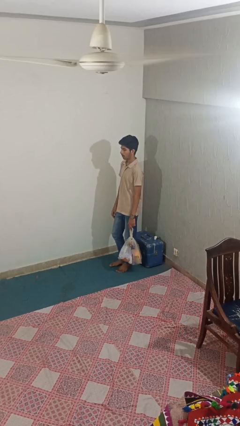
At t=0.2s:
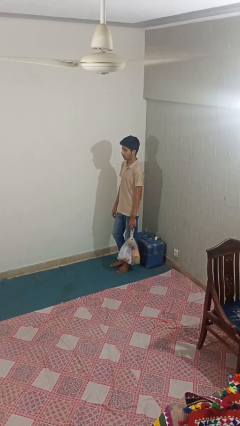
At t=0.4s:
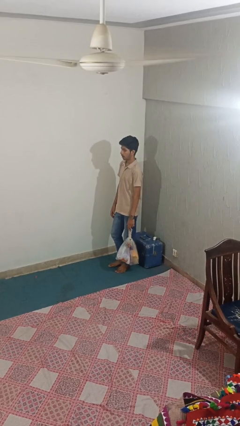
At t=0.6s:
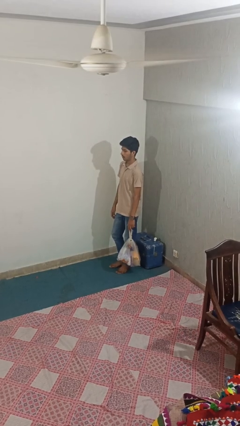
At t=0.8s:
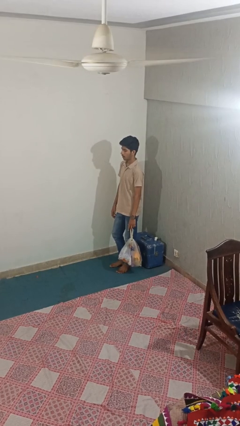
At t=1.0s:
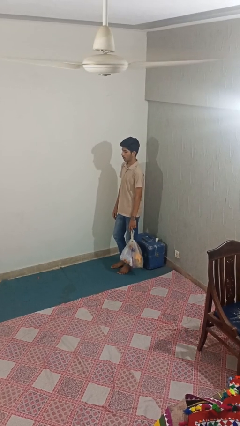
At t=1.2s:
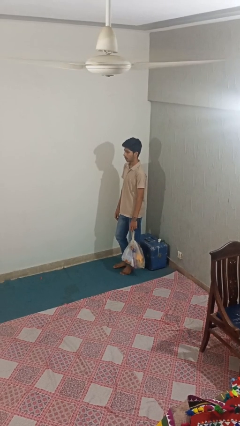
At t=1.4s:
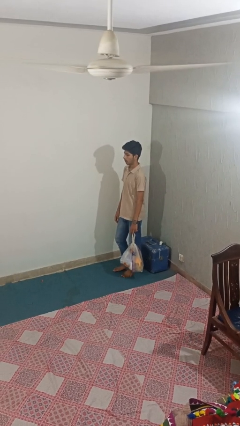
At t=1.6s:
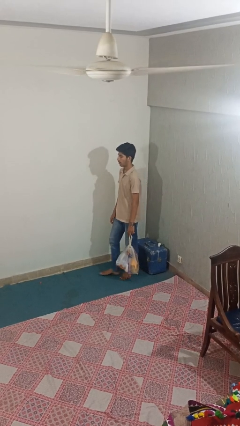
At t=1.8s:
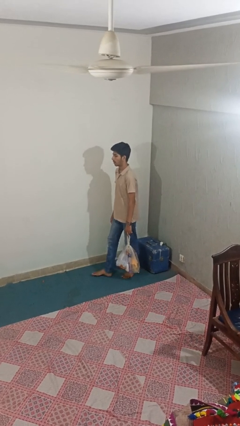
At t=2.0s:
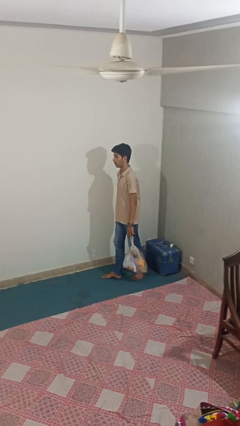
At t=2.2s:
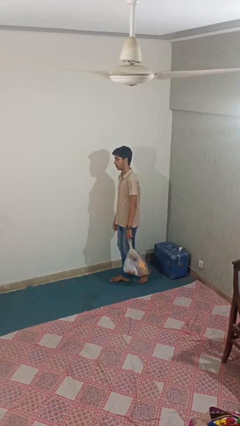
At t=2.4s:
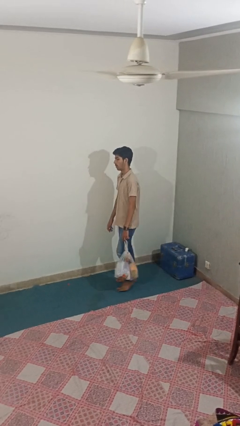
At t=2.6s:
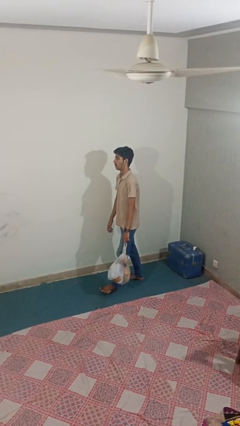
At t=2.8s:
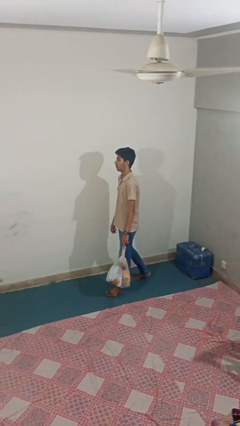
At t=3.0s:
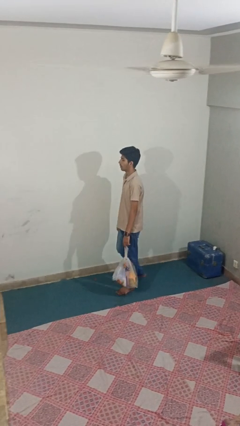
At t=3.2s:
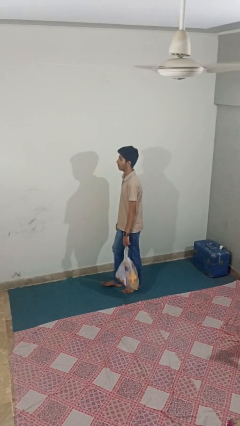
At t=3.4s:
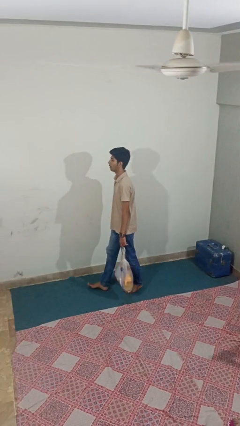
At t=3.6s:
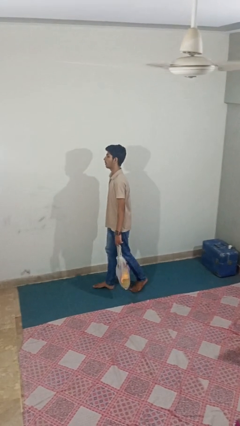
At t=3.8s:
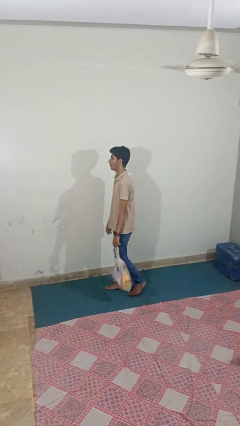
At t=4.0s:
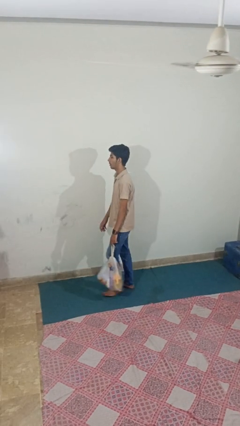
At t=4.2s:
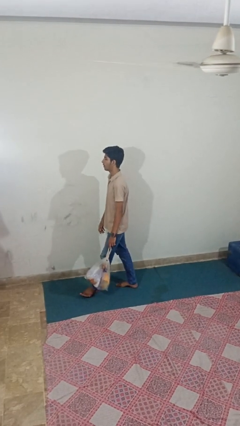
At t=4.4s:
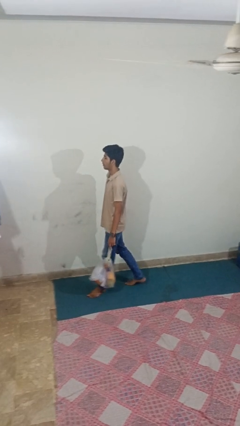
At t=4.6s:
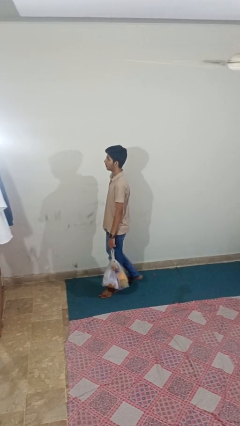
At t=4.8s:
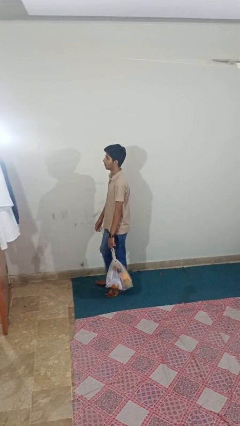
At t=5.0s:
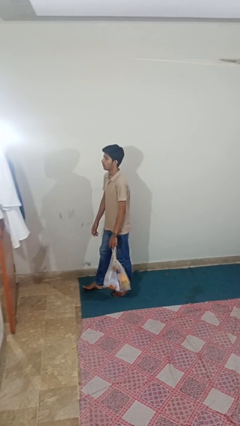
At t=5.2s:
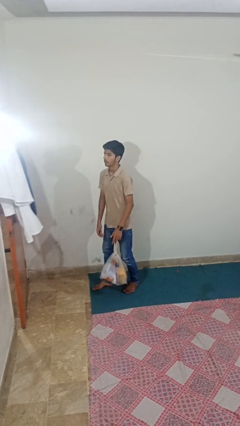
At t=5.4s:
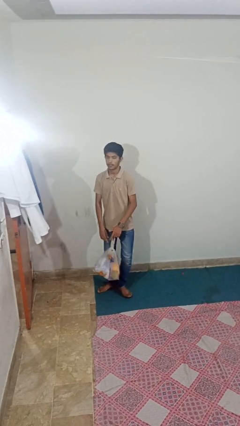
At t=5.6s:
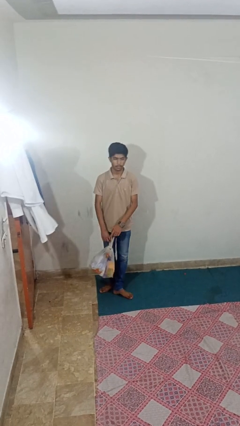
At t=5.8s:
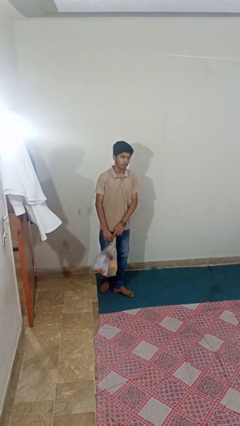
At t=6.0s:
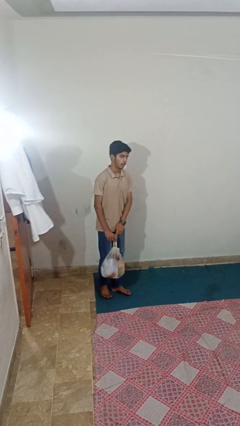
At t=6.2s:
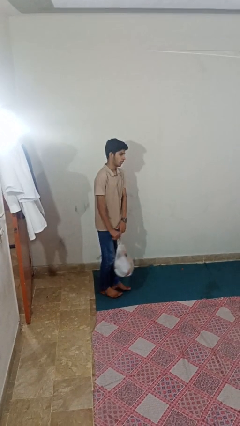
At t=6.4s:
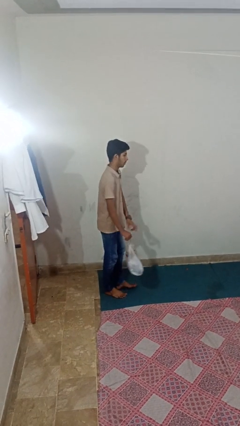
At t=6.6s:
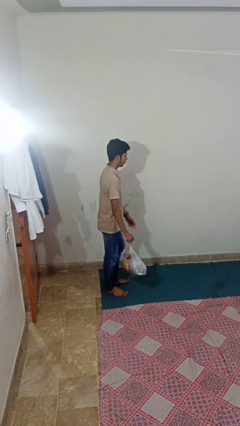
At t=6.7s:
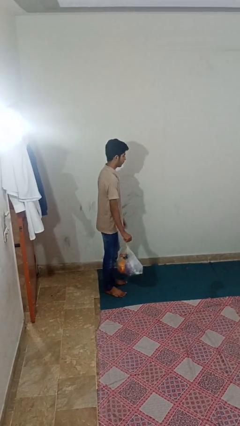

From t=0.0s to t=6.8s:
person carries groceries

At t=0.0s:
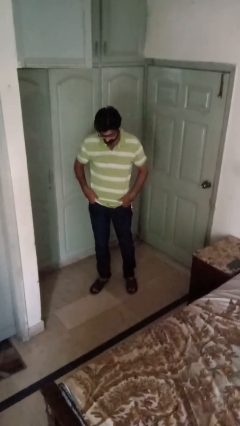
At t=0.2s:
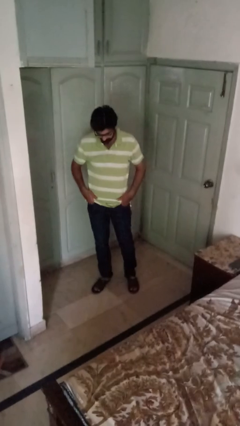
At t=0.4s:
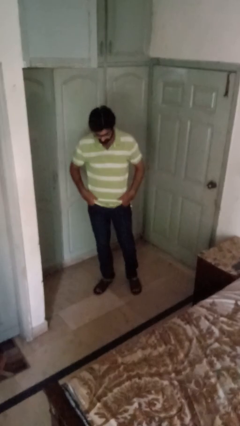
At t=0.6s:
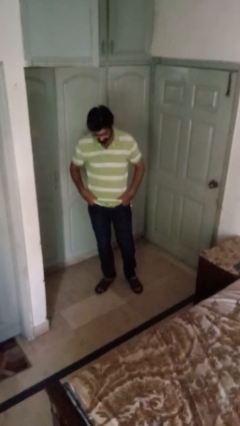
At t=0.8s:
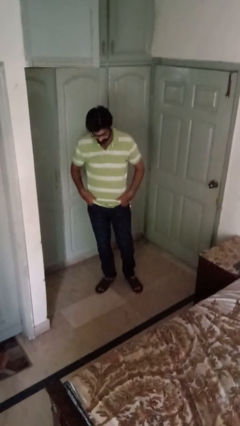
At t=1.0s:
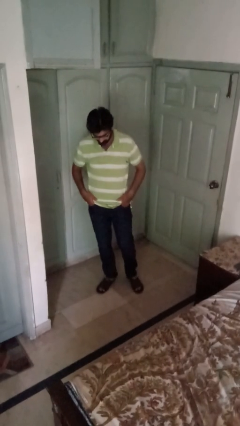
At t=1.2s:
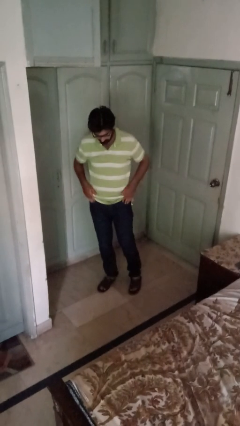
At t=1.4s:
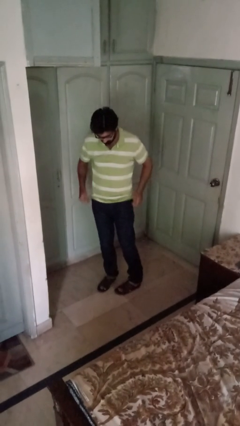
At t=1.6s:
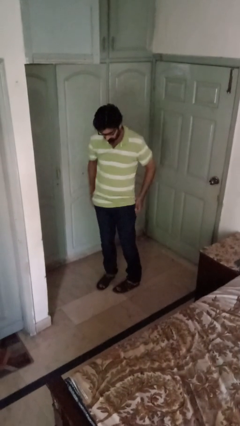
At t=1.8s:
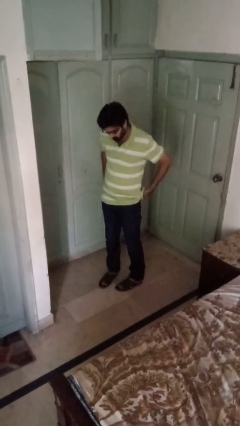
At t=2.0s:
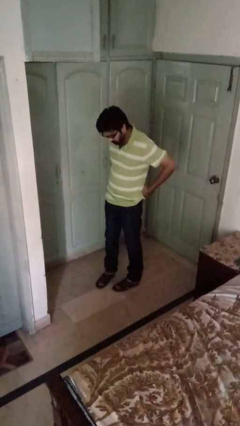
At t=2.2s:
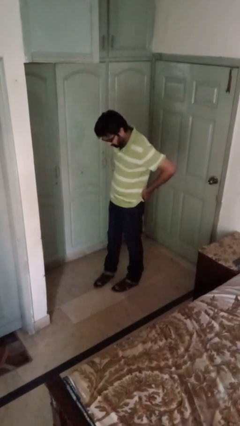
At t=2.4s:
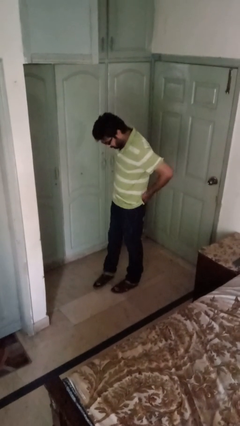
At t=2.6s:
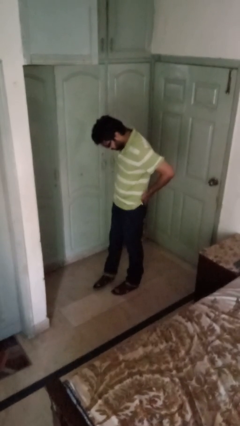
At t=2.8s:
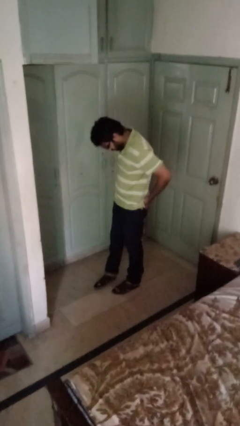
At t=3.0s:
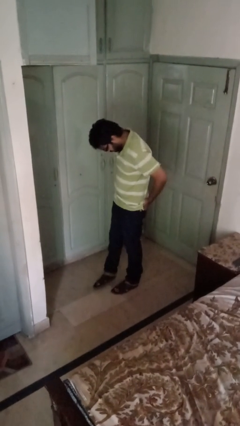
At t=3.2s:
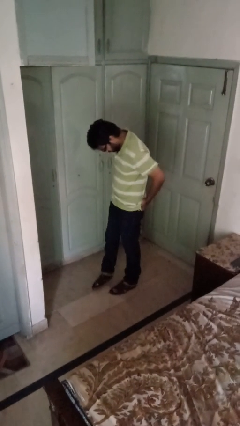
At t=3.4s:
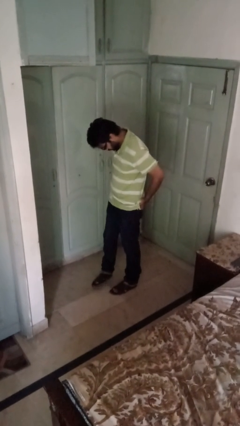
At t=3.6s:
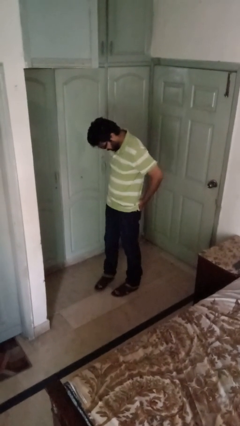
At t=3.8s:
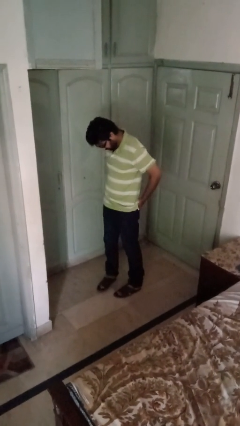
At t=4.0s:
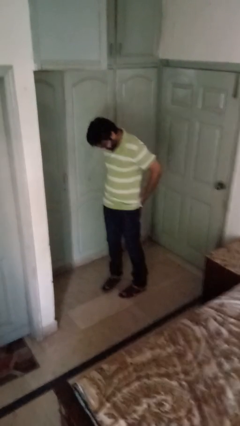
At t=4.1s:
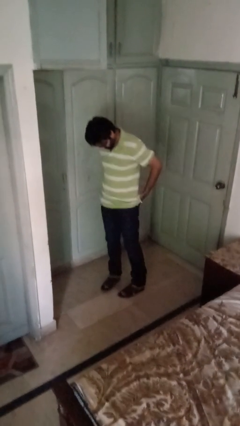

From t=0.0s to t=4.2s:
person puts hands in back pockets

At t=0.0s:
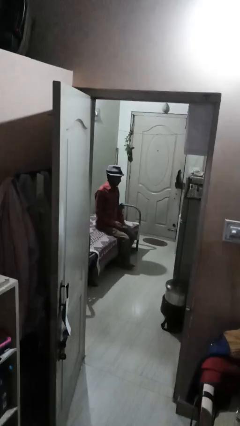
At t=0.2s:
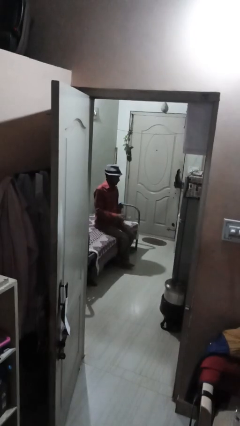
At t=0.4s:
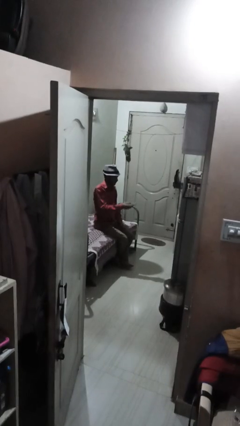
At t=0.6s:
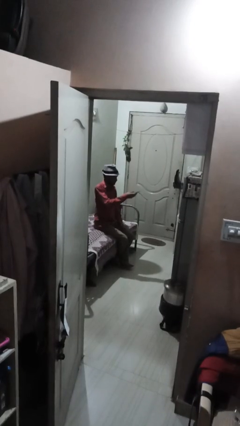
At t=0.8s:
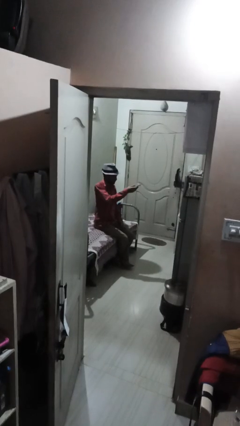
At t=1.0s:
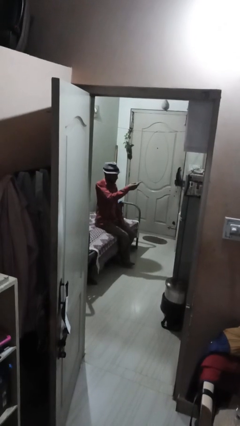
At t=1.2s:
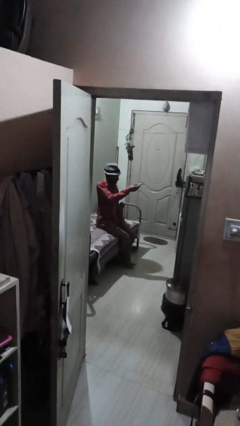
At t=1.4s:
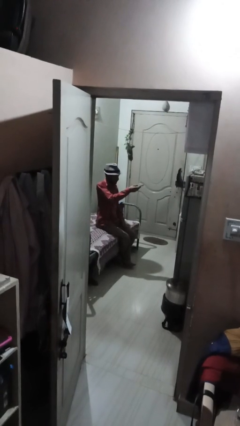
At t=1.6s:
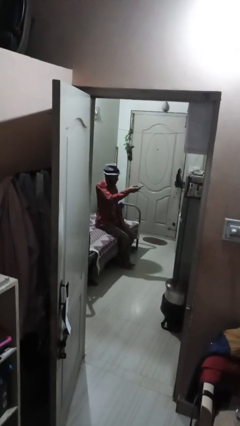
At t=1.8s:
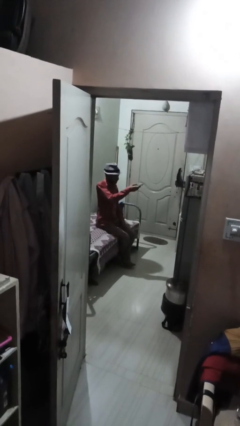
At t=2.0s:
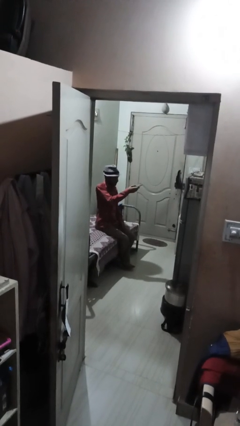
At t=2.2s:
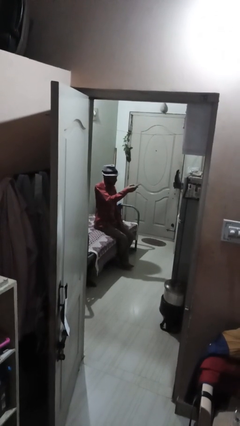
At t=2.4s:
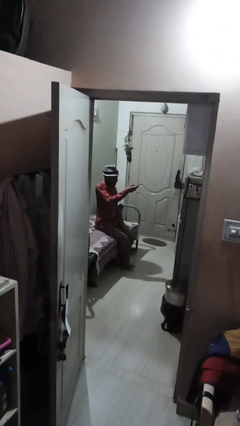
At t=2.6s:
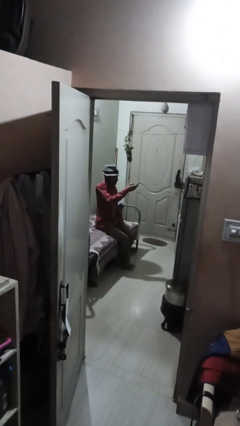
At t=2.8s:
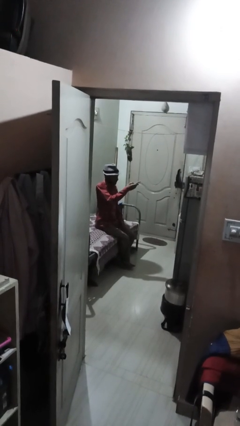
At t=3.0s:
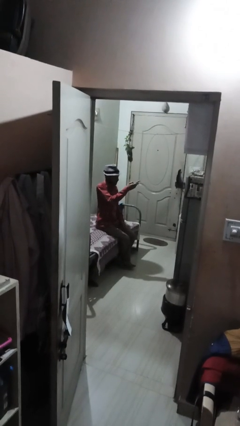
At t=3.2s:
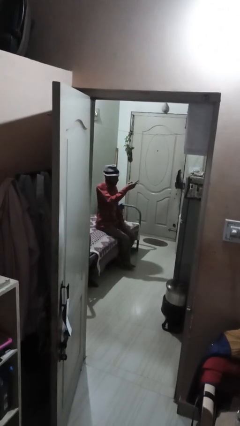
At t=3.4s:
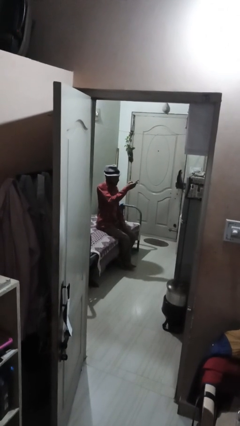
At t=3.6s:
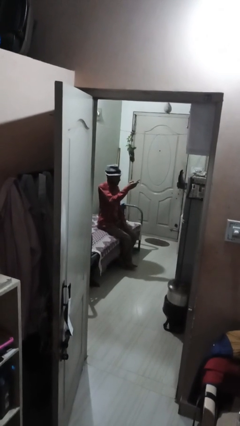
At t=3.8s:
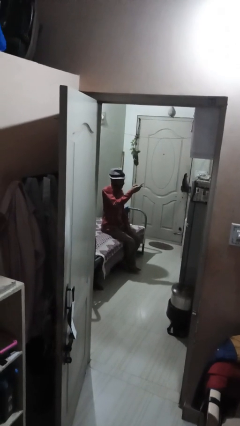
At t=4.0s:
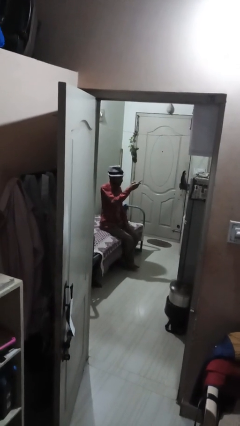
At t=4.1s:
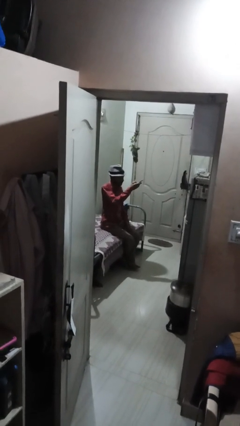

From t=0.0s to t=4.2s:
person uses television remote

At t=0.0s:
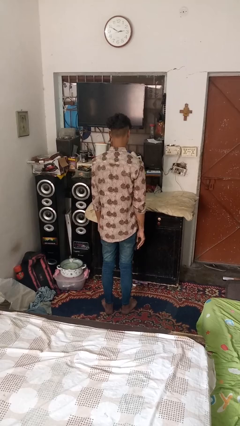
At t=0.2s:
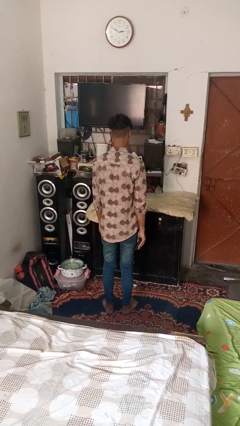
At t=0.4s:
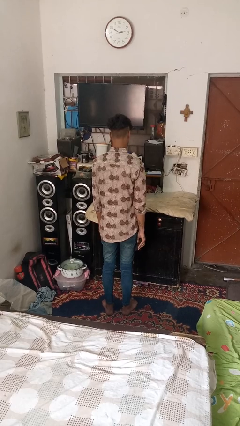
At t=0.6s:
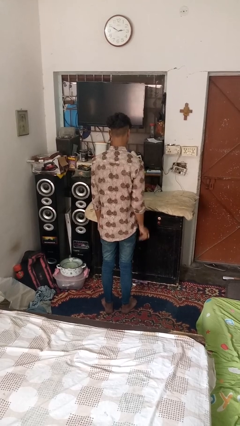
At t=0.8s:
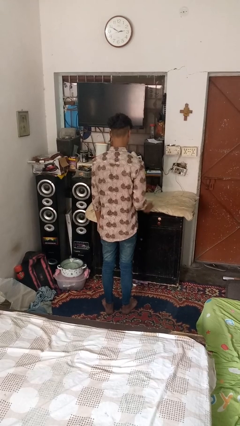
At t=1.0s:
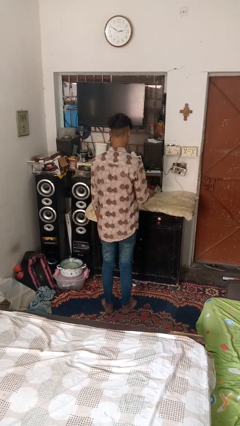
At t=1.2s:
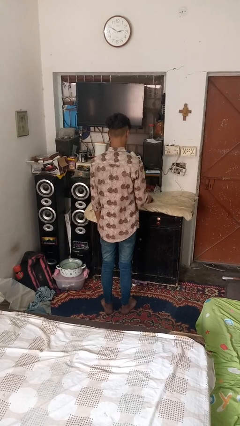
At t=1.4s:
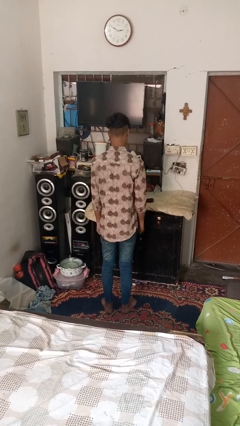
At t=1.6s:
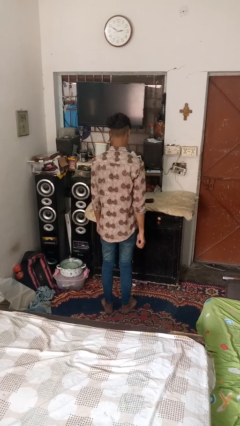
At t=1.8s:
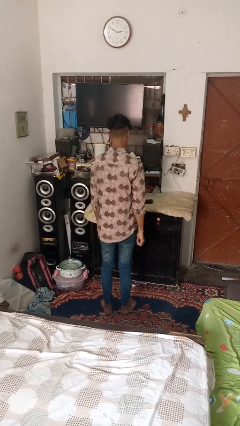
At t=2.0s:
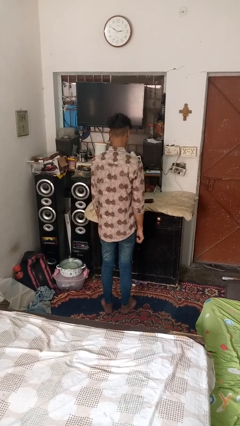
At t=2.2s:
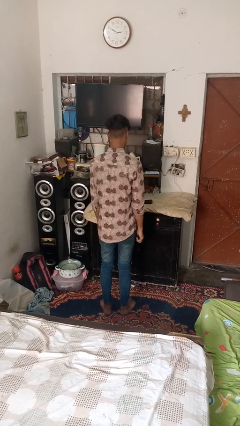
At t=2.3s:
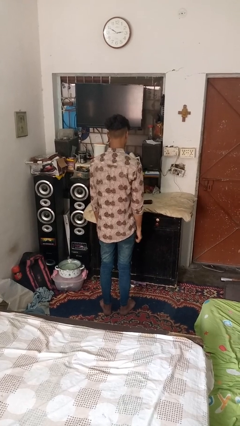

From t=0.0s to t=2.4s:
person throws object on table
